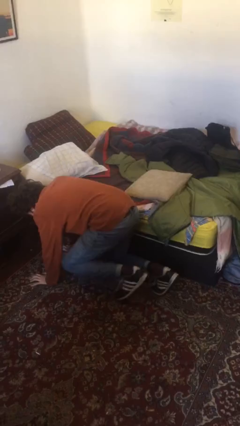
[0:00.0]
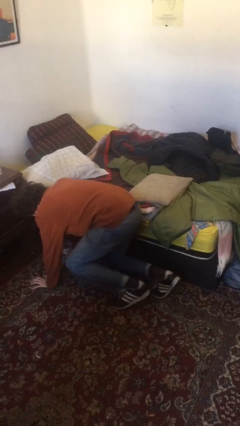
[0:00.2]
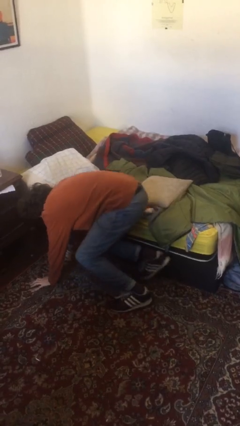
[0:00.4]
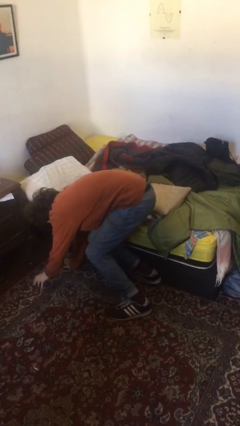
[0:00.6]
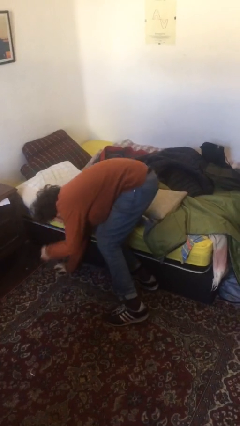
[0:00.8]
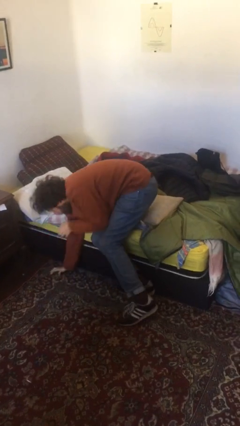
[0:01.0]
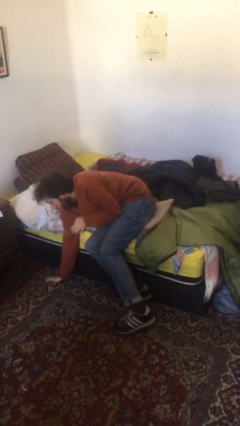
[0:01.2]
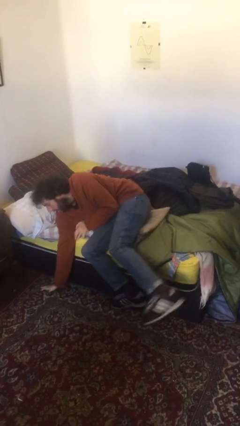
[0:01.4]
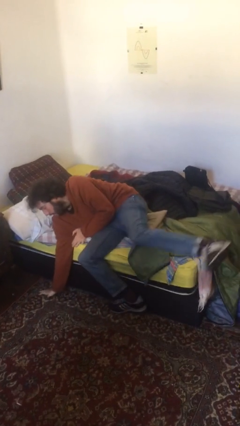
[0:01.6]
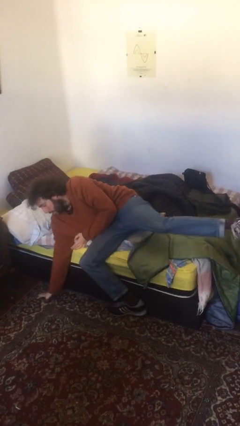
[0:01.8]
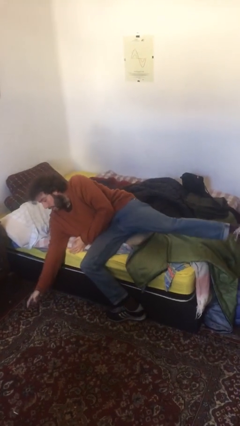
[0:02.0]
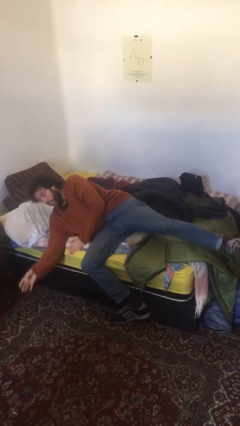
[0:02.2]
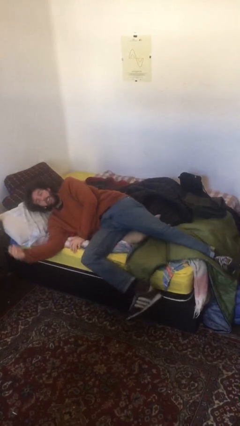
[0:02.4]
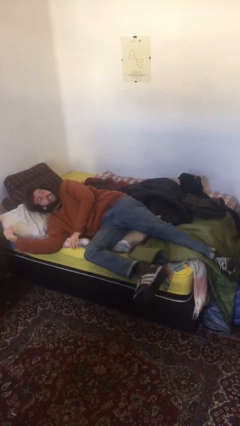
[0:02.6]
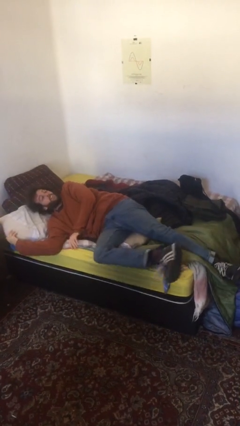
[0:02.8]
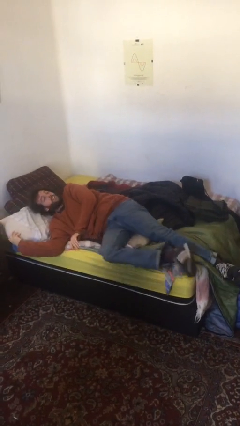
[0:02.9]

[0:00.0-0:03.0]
person stands up from floor

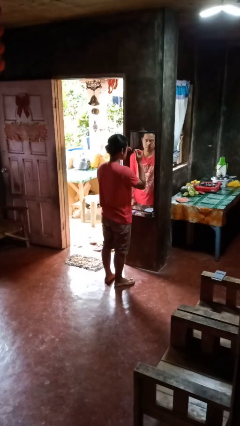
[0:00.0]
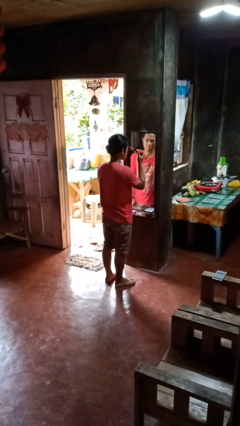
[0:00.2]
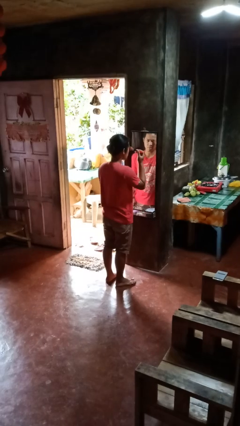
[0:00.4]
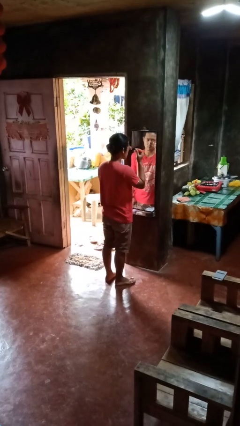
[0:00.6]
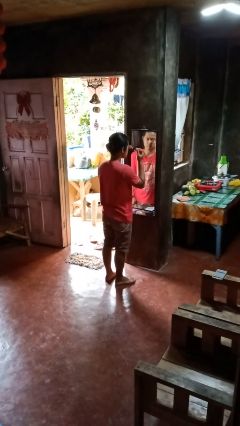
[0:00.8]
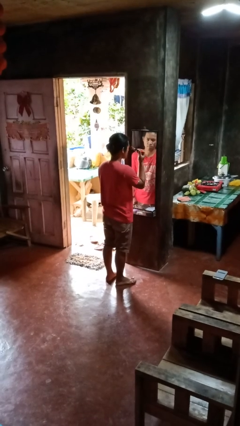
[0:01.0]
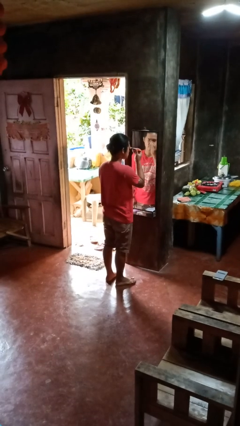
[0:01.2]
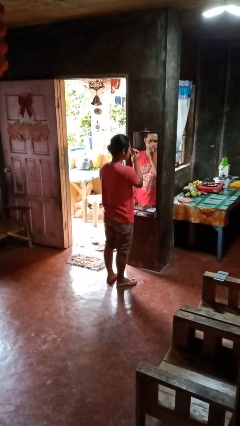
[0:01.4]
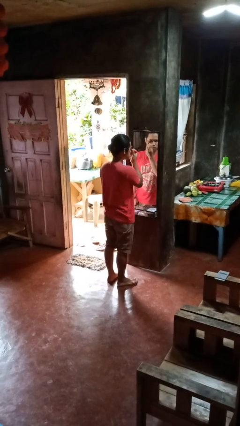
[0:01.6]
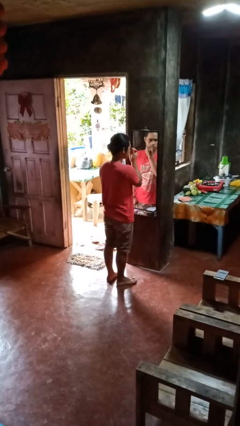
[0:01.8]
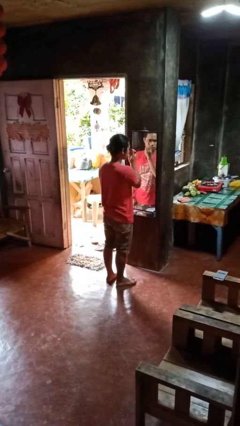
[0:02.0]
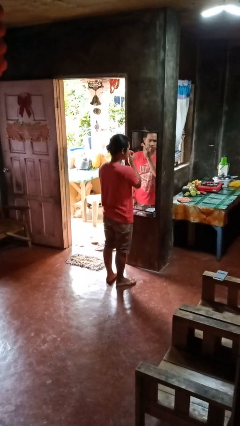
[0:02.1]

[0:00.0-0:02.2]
person applies eye makeup

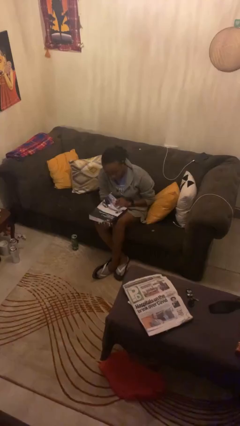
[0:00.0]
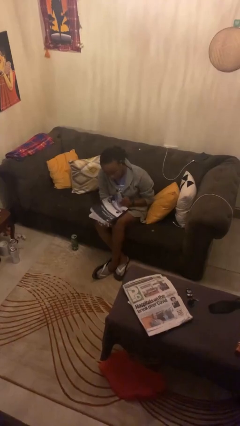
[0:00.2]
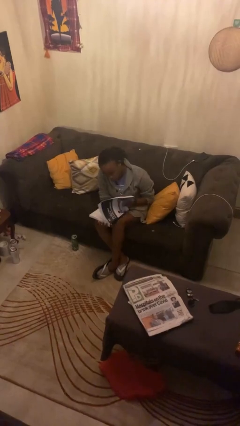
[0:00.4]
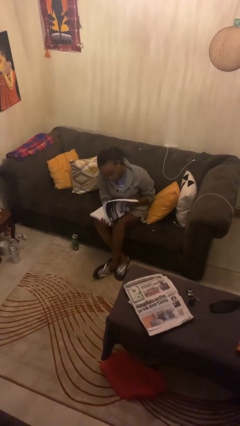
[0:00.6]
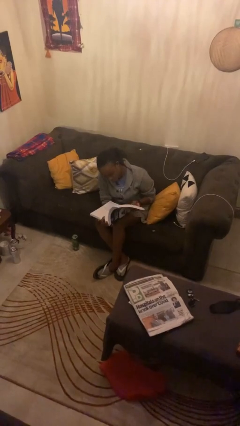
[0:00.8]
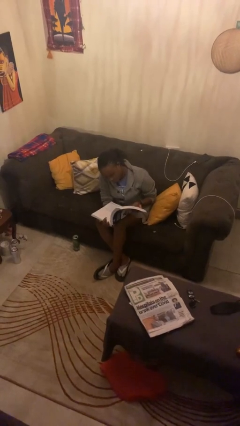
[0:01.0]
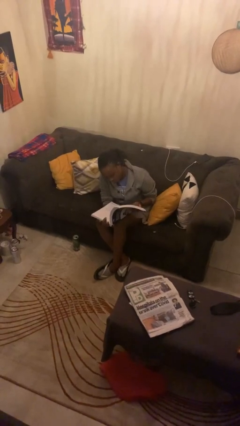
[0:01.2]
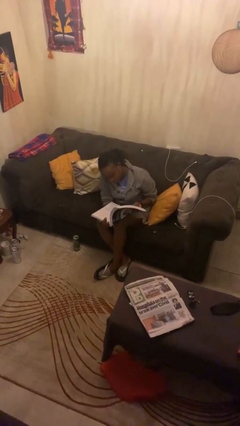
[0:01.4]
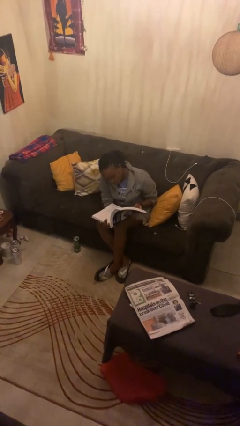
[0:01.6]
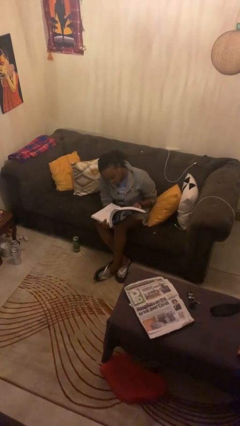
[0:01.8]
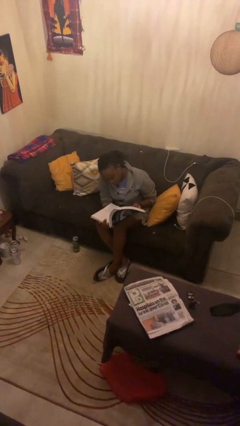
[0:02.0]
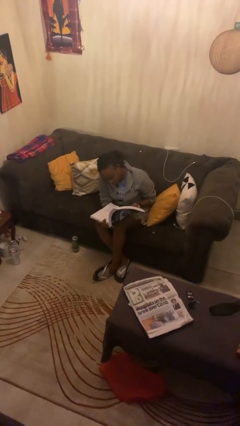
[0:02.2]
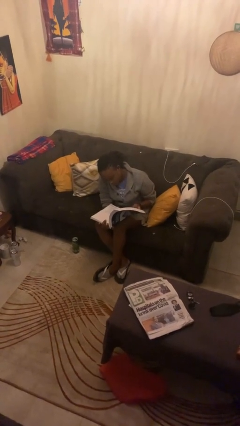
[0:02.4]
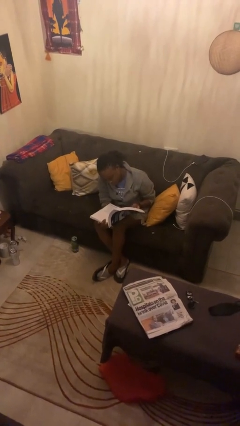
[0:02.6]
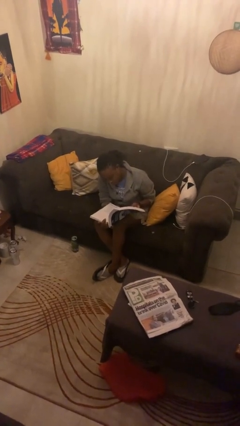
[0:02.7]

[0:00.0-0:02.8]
person reads book

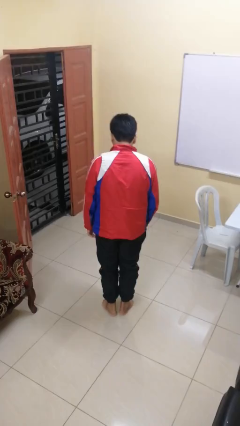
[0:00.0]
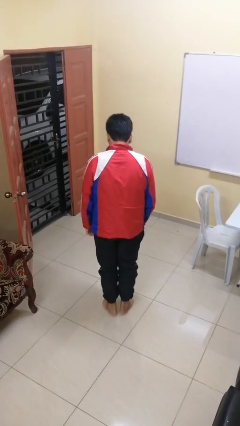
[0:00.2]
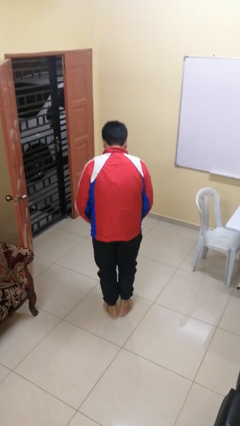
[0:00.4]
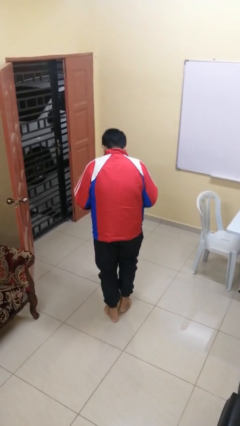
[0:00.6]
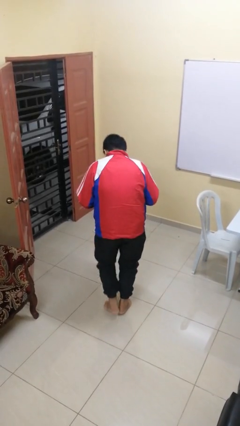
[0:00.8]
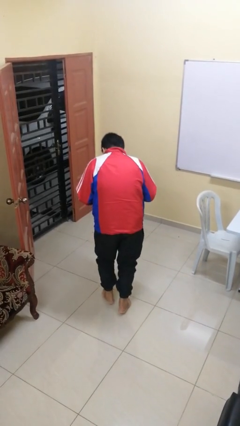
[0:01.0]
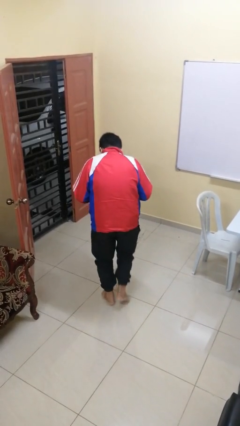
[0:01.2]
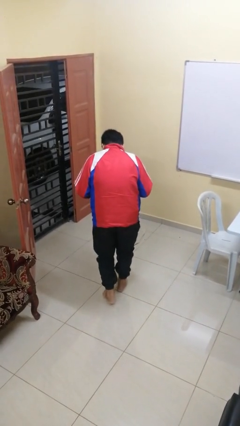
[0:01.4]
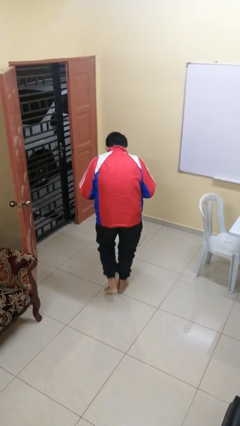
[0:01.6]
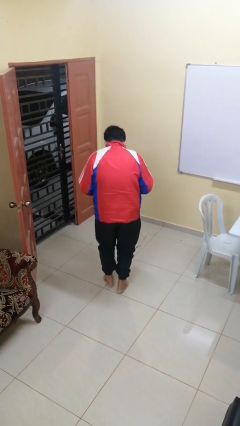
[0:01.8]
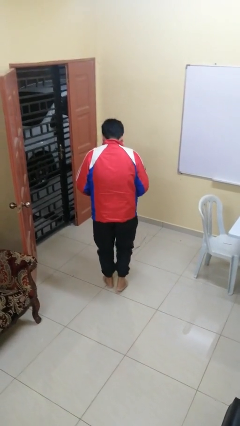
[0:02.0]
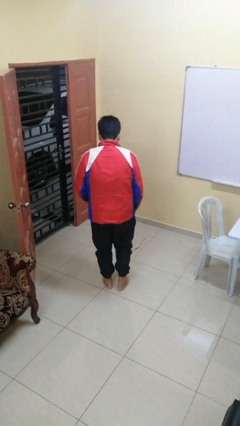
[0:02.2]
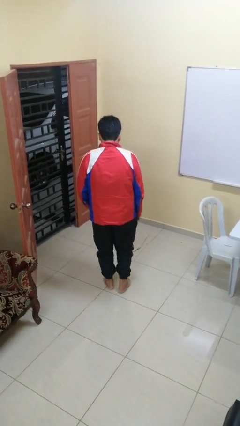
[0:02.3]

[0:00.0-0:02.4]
person walks tiptoe

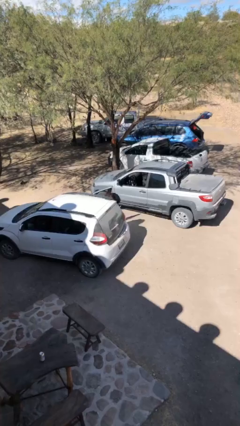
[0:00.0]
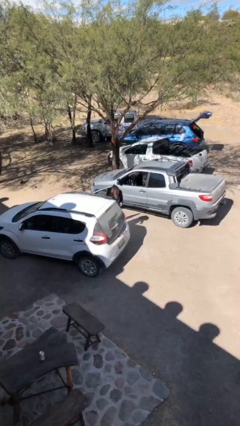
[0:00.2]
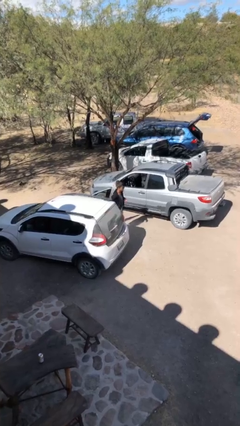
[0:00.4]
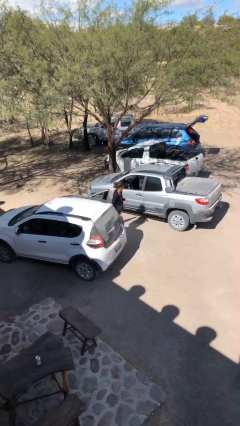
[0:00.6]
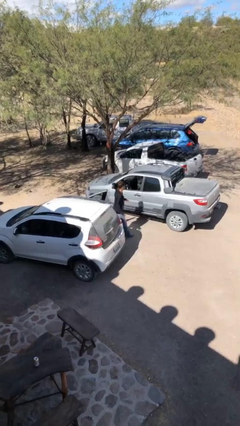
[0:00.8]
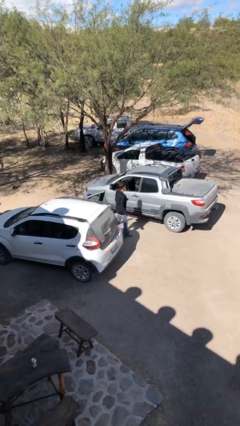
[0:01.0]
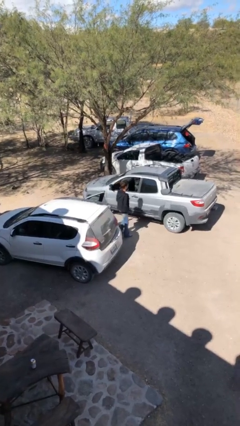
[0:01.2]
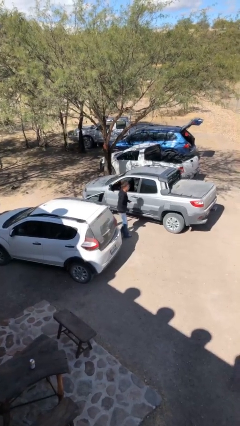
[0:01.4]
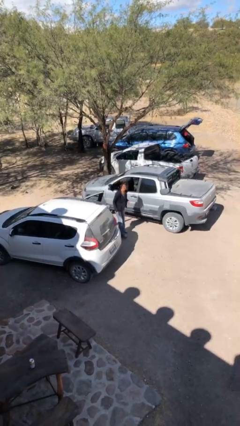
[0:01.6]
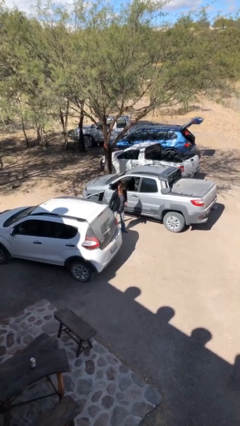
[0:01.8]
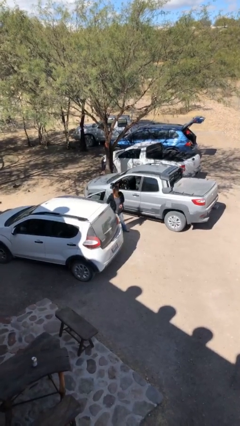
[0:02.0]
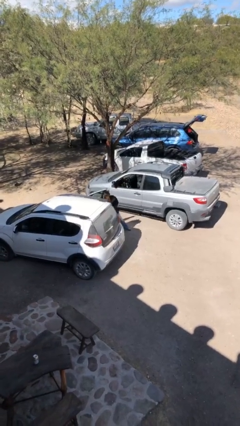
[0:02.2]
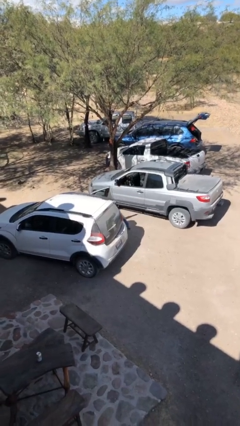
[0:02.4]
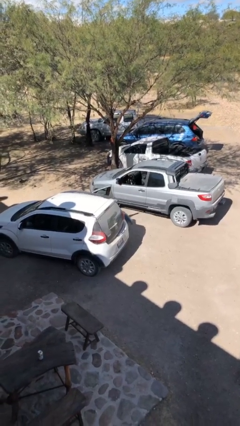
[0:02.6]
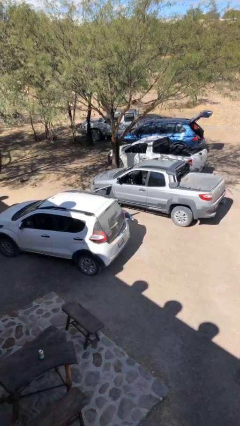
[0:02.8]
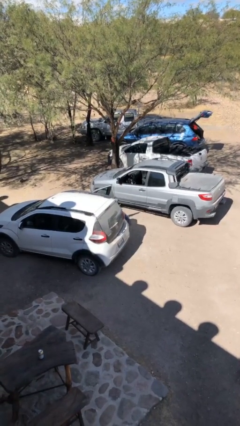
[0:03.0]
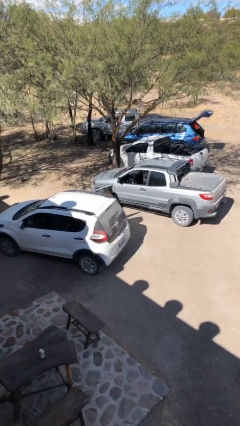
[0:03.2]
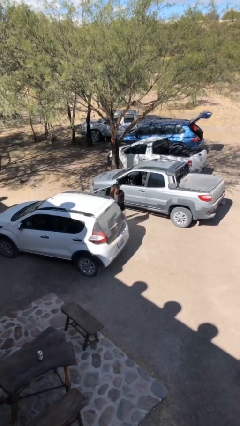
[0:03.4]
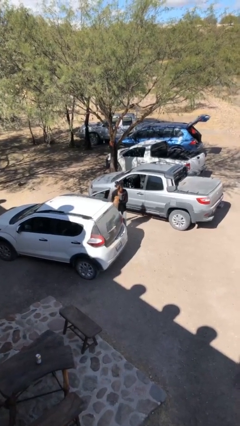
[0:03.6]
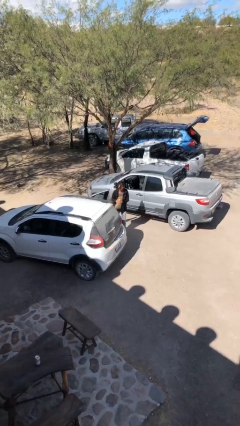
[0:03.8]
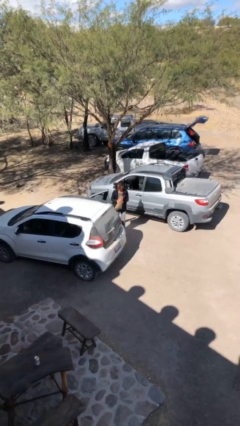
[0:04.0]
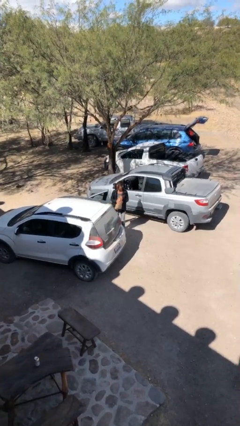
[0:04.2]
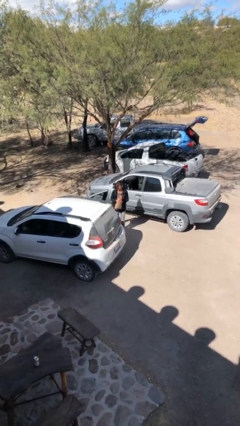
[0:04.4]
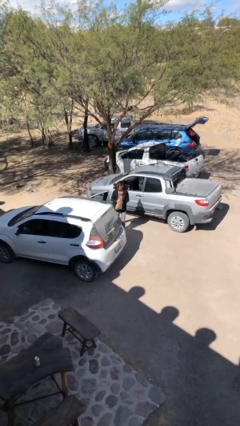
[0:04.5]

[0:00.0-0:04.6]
person unloads car

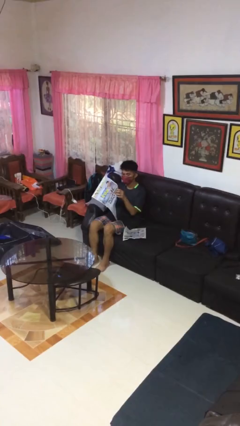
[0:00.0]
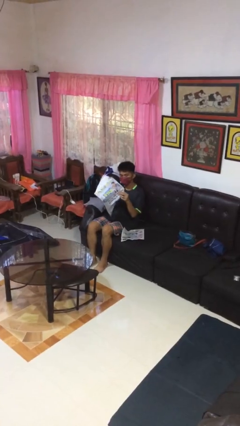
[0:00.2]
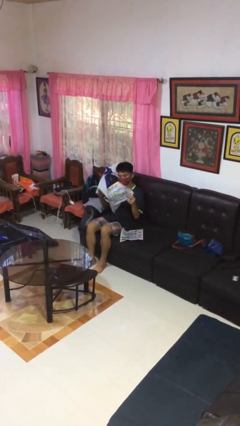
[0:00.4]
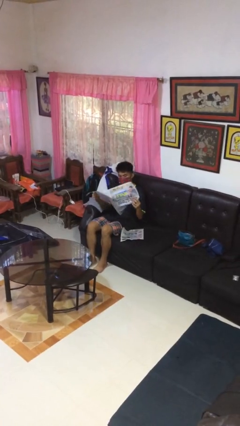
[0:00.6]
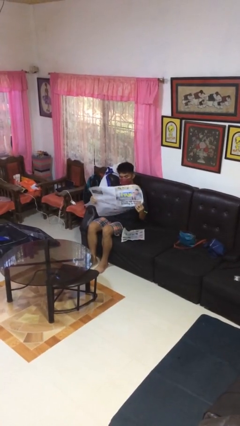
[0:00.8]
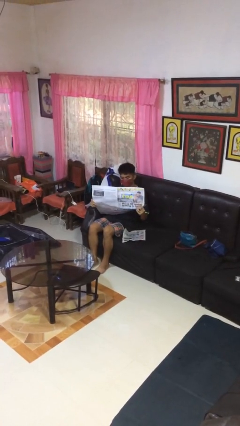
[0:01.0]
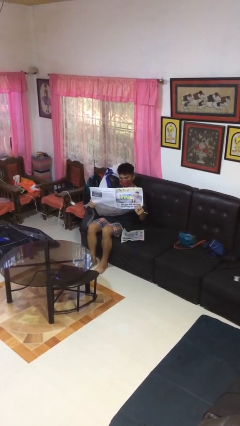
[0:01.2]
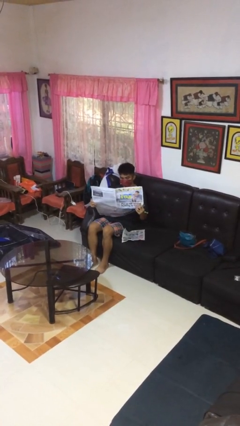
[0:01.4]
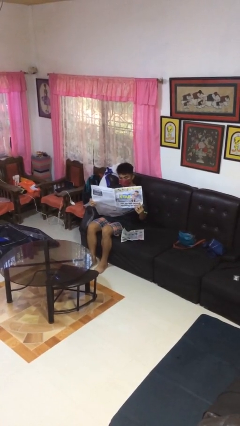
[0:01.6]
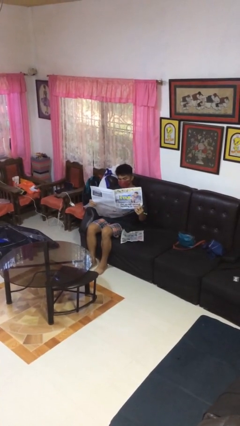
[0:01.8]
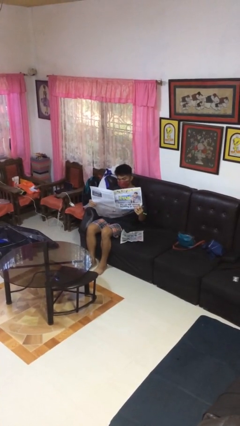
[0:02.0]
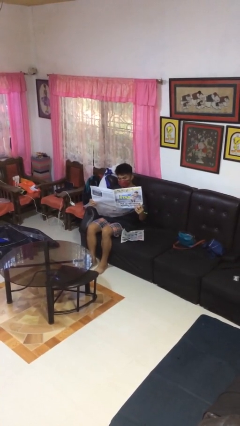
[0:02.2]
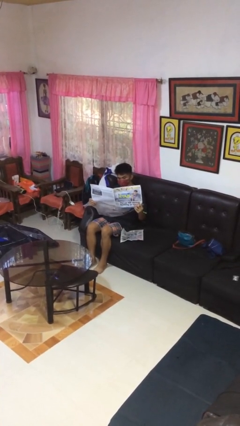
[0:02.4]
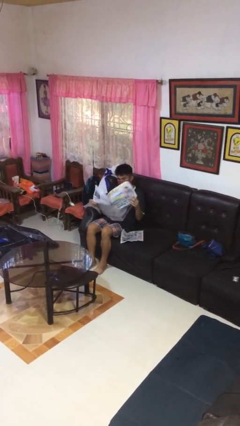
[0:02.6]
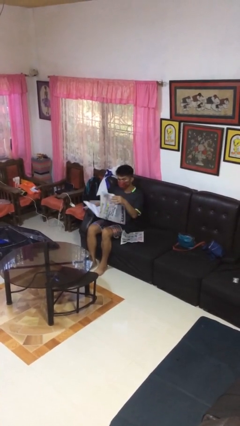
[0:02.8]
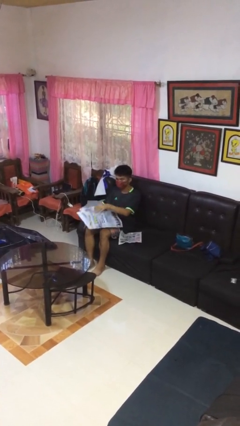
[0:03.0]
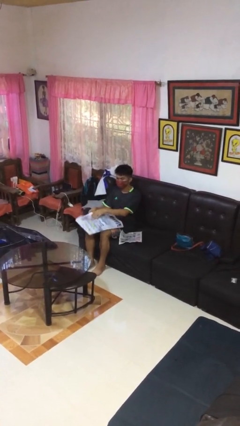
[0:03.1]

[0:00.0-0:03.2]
person reads newspaper
